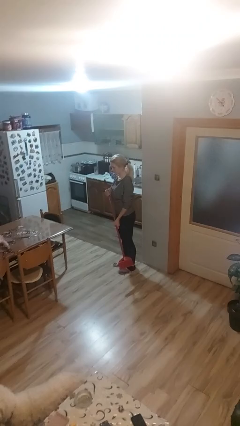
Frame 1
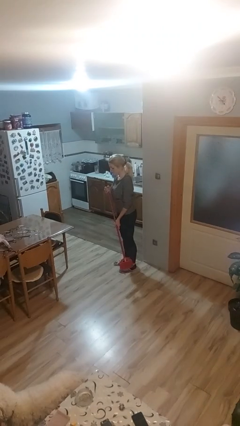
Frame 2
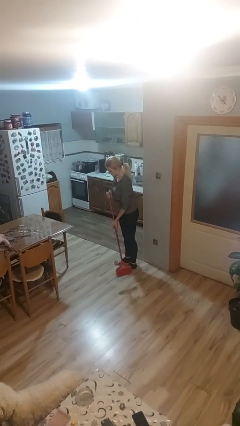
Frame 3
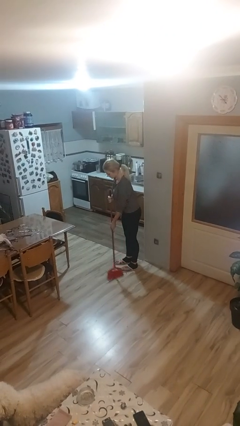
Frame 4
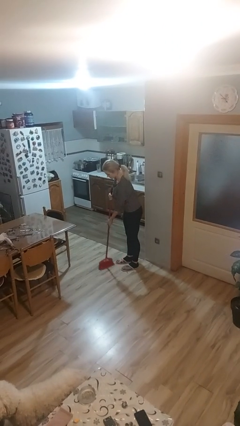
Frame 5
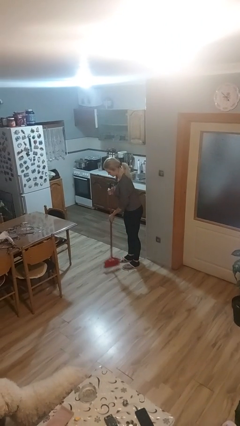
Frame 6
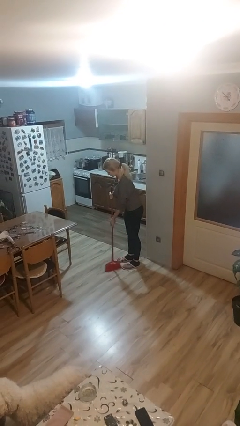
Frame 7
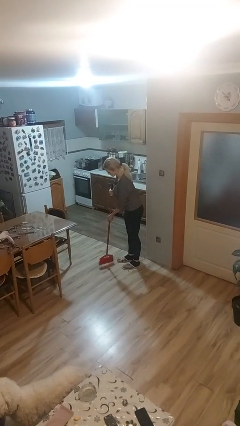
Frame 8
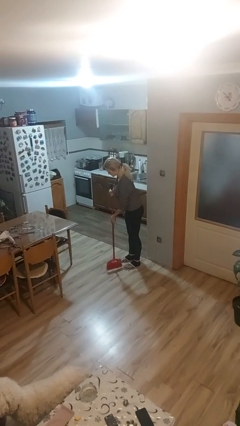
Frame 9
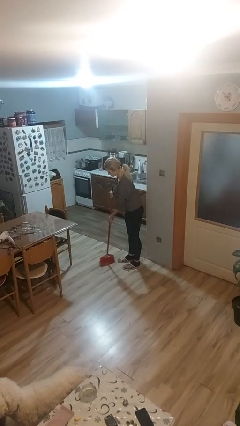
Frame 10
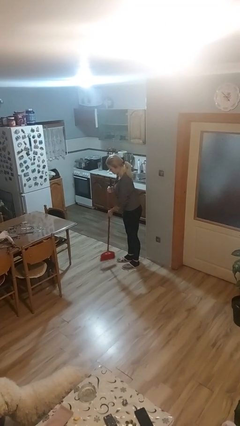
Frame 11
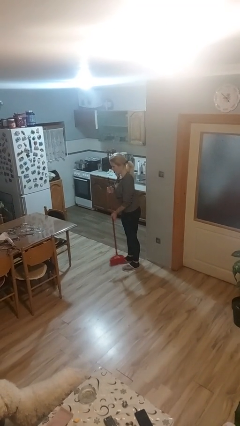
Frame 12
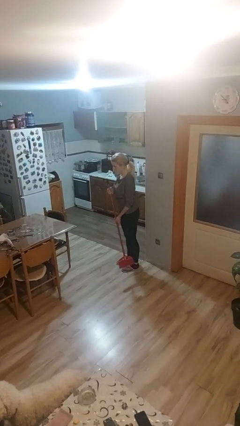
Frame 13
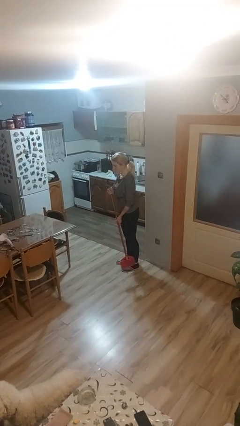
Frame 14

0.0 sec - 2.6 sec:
person sweeps floor

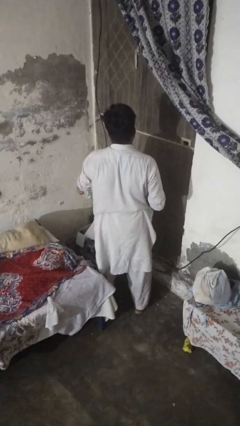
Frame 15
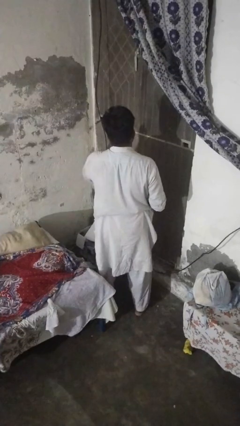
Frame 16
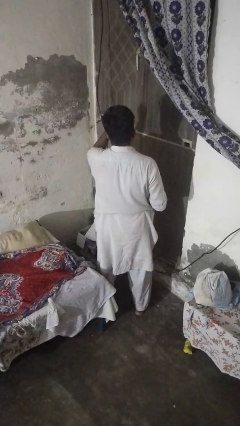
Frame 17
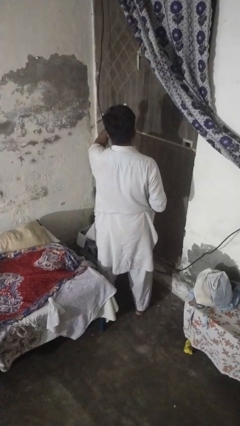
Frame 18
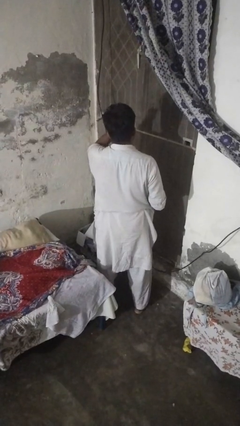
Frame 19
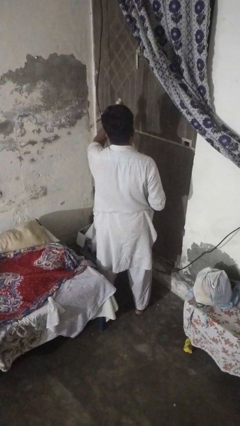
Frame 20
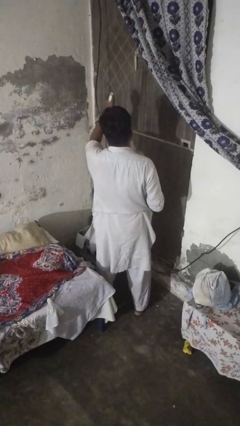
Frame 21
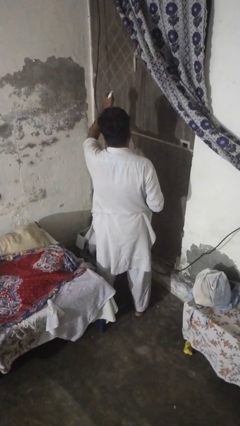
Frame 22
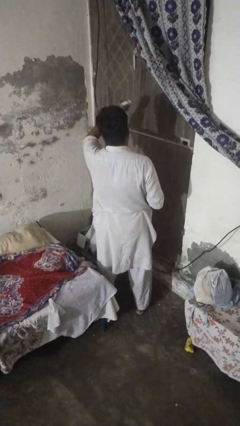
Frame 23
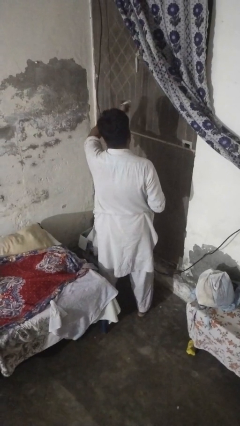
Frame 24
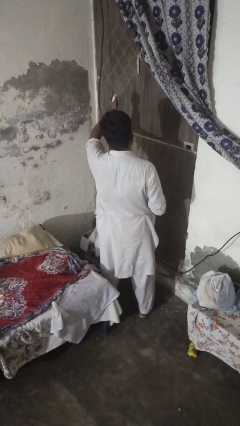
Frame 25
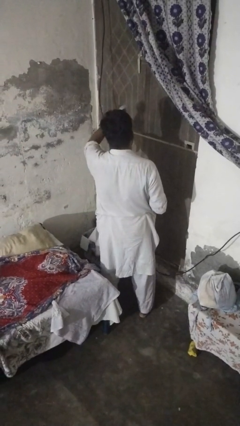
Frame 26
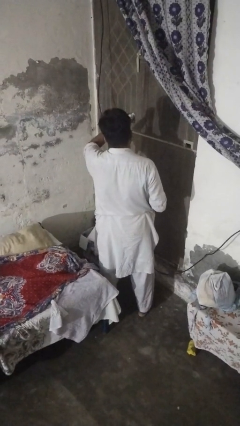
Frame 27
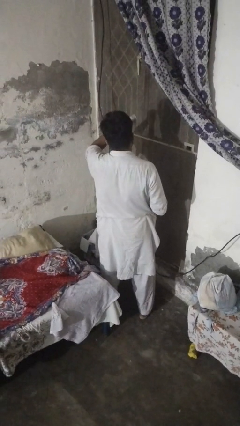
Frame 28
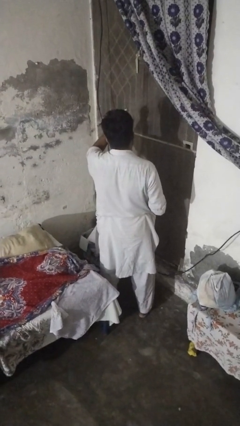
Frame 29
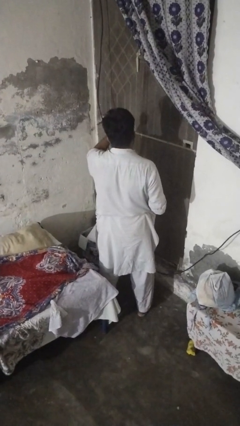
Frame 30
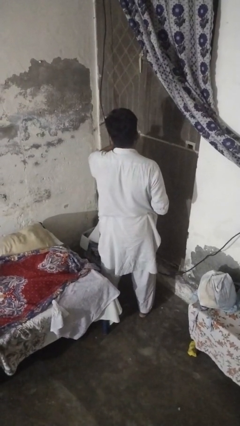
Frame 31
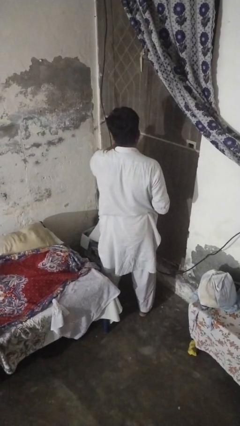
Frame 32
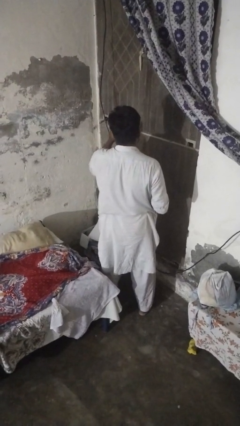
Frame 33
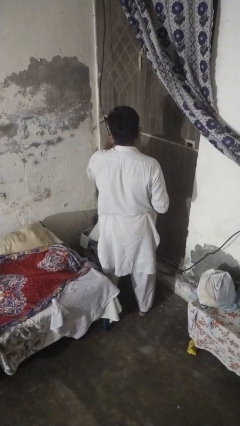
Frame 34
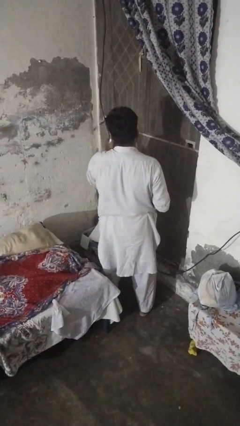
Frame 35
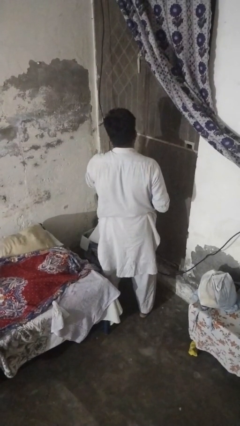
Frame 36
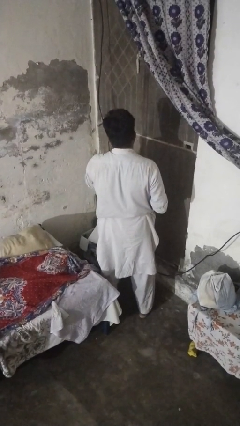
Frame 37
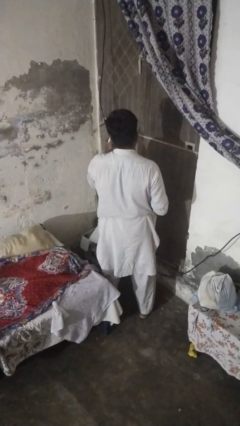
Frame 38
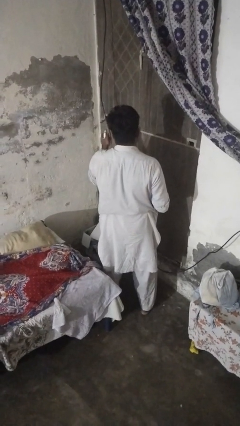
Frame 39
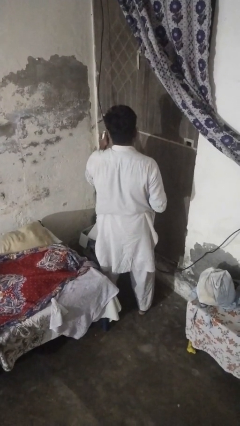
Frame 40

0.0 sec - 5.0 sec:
person sprays from bottle

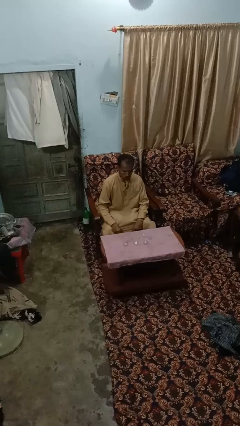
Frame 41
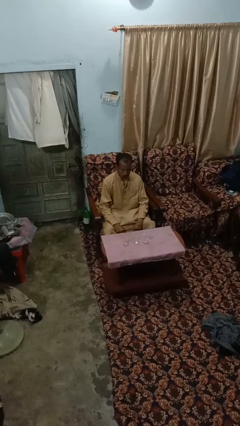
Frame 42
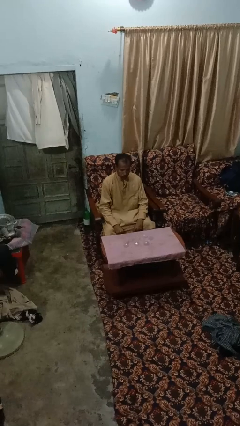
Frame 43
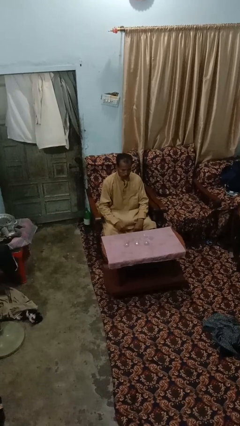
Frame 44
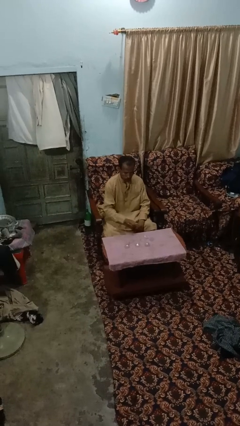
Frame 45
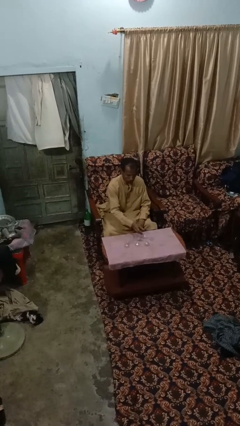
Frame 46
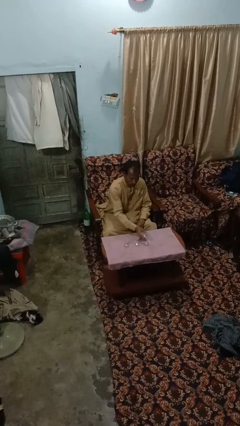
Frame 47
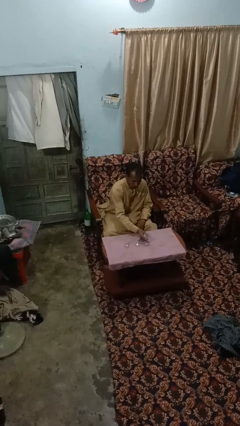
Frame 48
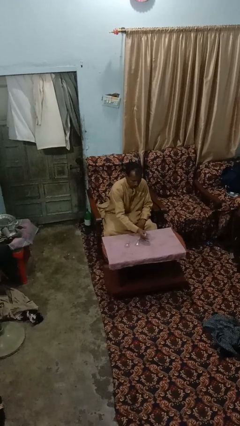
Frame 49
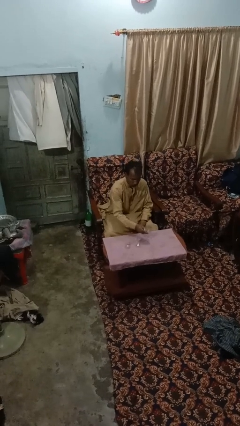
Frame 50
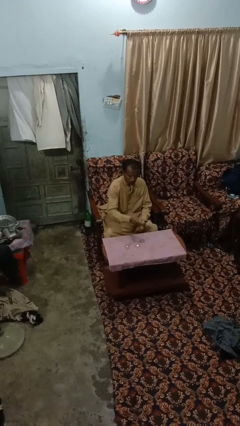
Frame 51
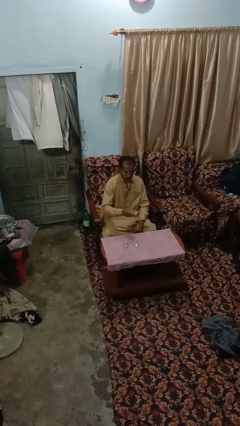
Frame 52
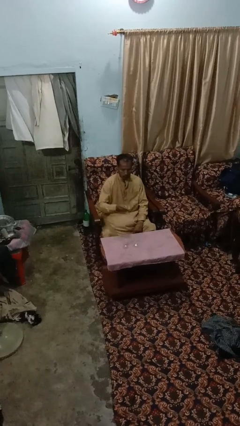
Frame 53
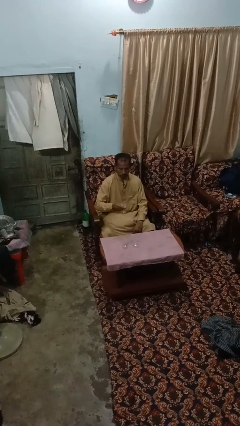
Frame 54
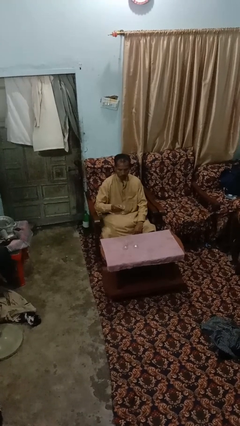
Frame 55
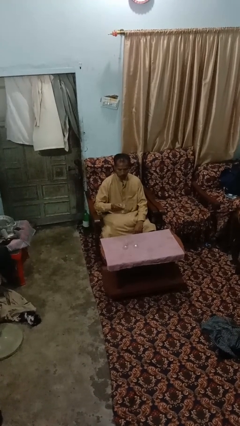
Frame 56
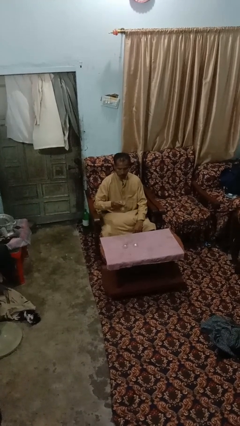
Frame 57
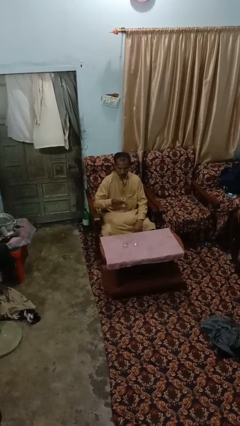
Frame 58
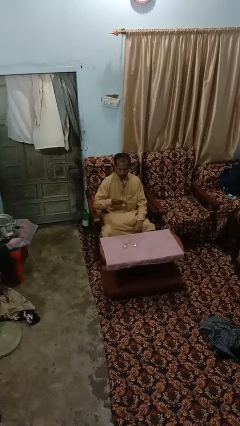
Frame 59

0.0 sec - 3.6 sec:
person picks up object from table

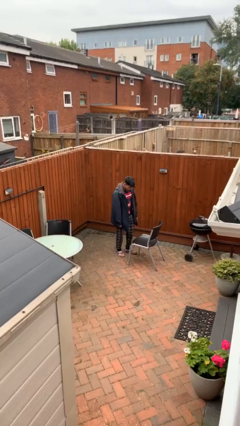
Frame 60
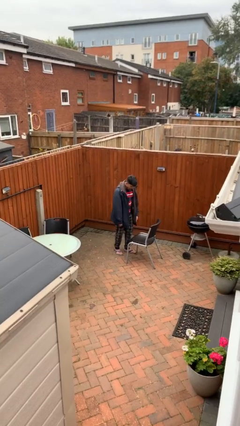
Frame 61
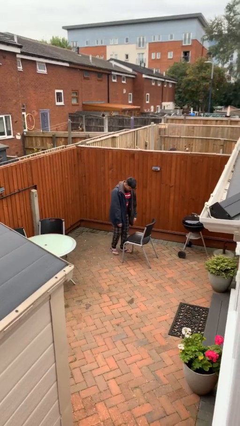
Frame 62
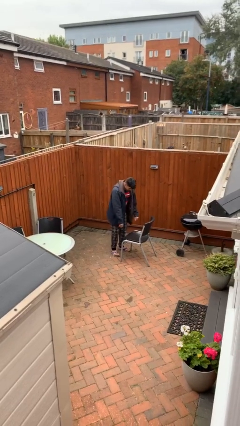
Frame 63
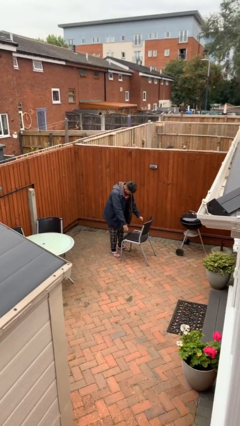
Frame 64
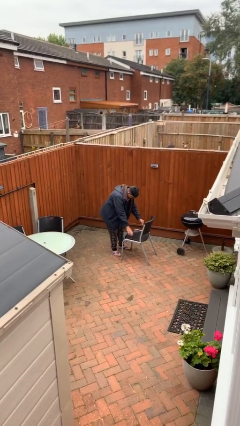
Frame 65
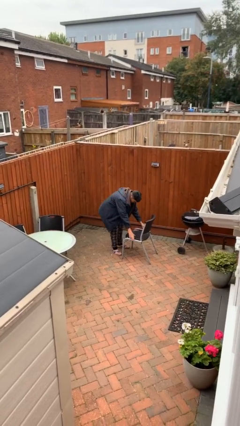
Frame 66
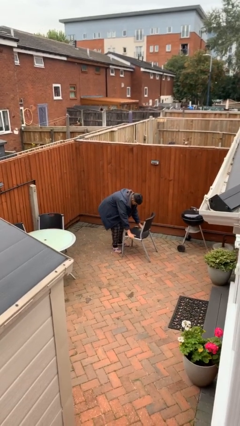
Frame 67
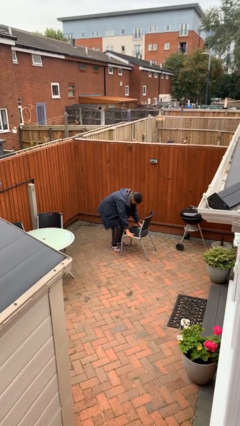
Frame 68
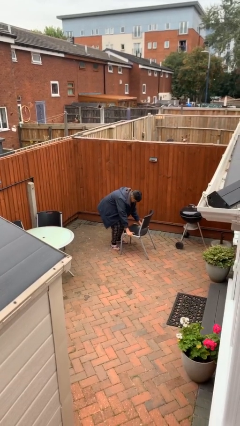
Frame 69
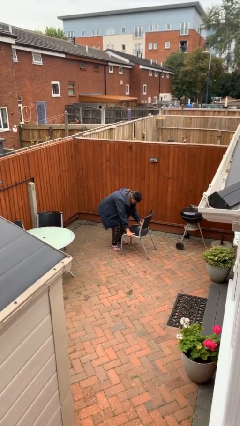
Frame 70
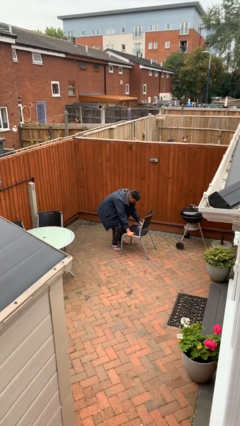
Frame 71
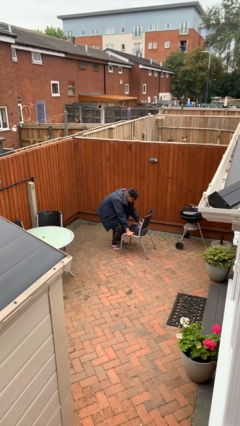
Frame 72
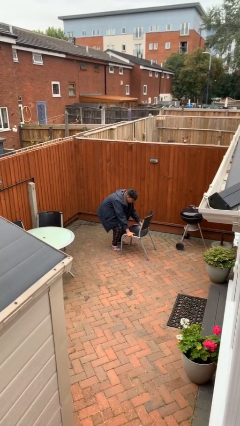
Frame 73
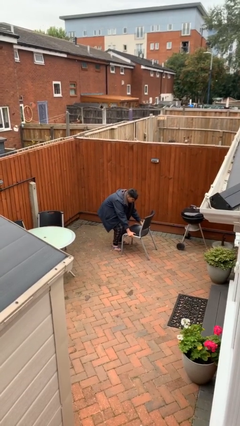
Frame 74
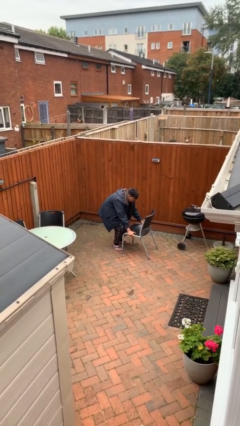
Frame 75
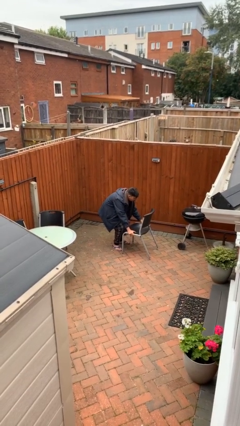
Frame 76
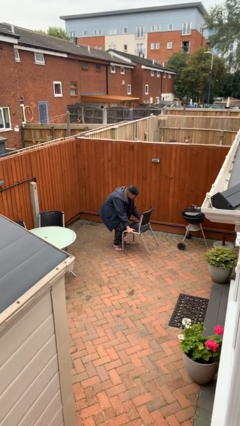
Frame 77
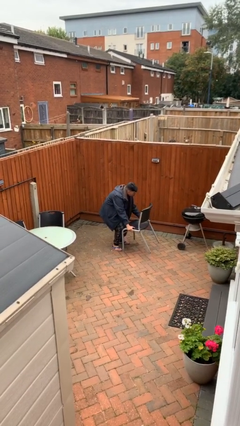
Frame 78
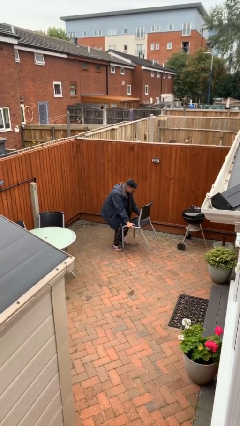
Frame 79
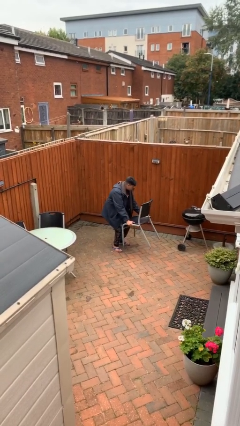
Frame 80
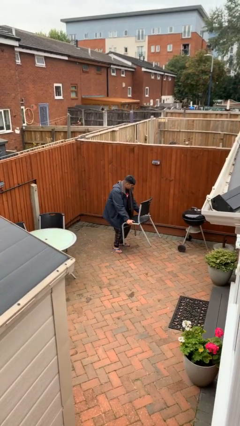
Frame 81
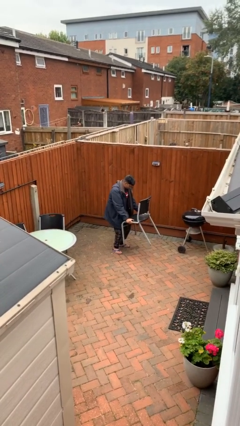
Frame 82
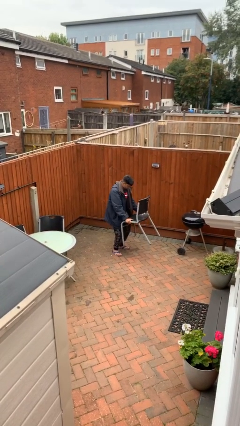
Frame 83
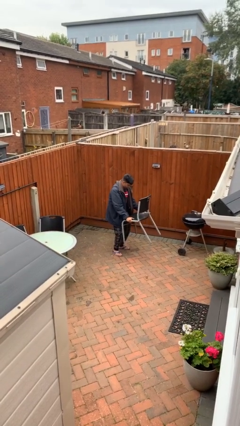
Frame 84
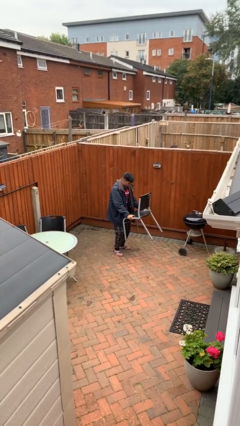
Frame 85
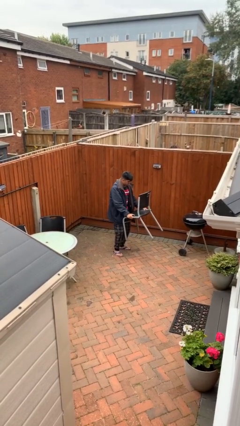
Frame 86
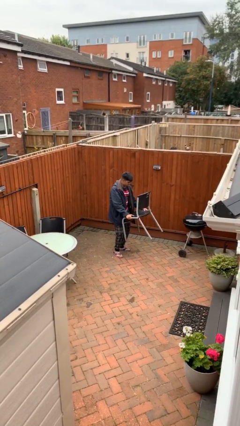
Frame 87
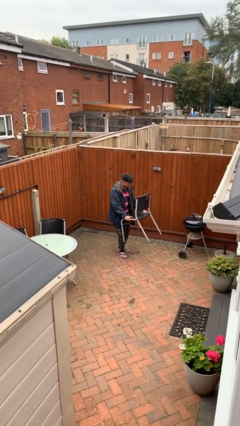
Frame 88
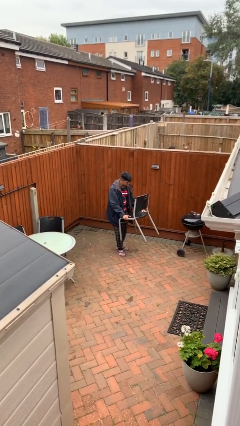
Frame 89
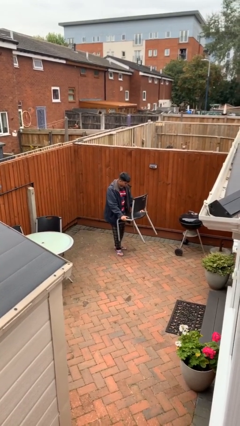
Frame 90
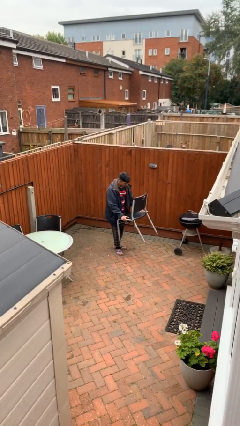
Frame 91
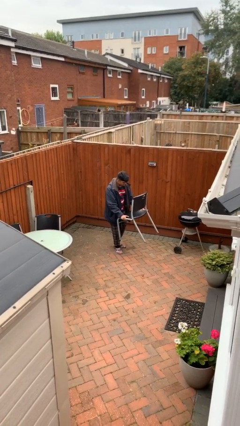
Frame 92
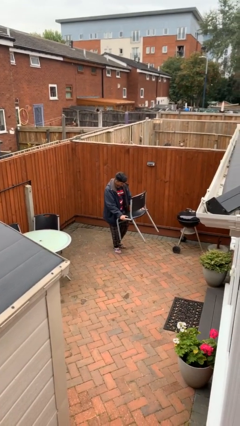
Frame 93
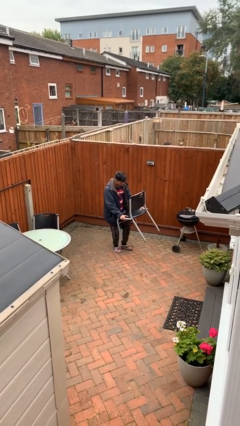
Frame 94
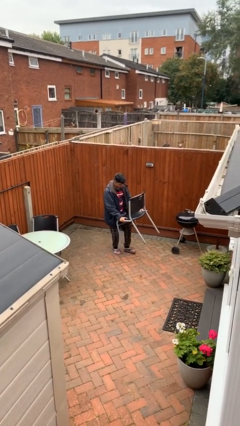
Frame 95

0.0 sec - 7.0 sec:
person picks up object from floor

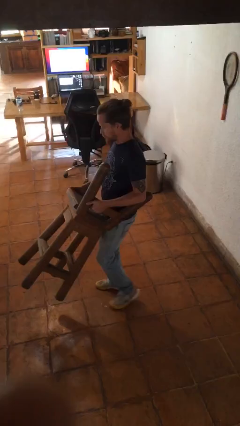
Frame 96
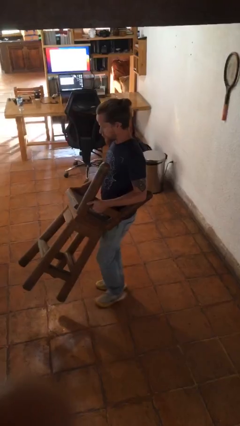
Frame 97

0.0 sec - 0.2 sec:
person carries furniture
